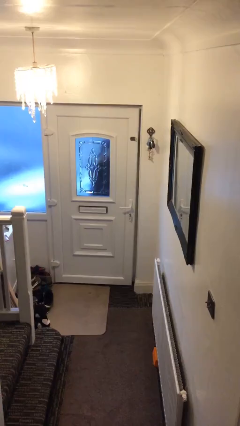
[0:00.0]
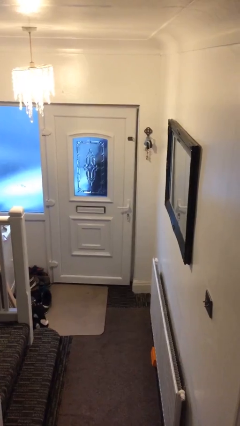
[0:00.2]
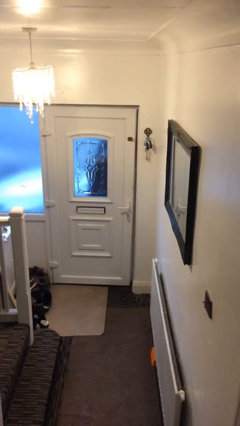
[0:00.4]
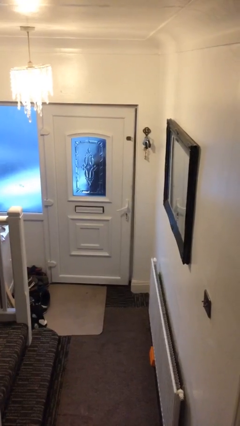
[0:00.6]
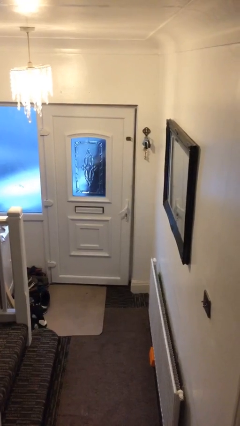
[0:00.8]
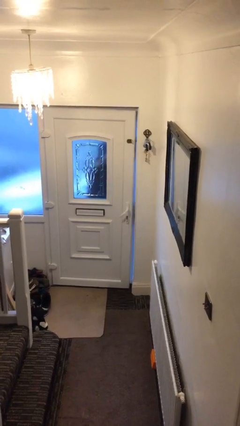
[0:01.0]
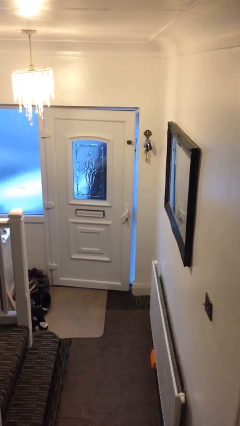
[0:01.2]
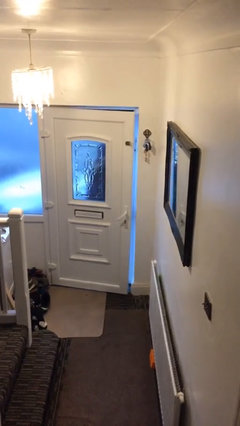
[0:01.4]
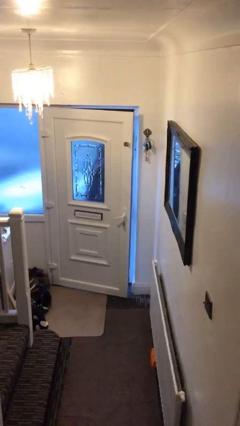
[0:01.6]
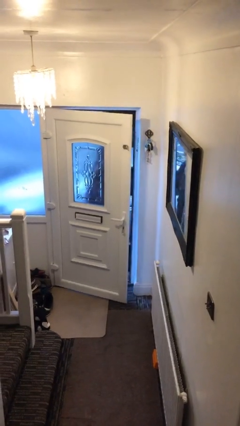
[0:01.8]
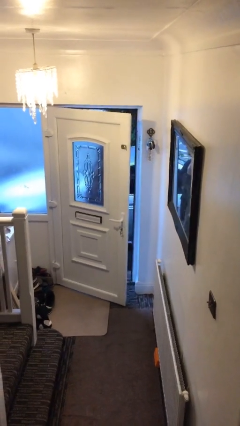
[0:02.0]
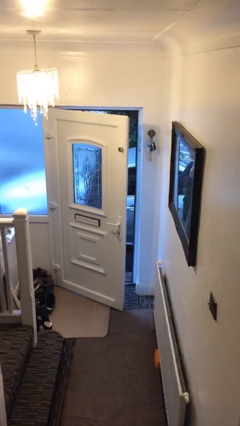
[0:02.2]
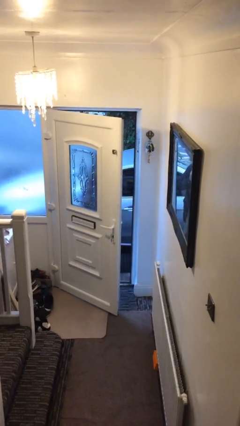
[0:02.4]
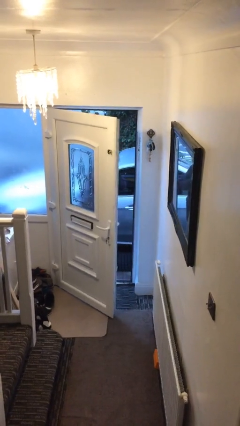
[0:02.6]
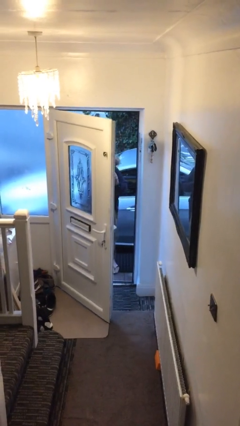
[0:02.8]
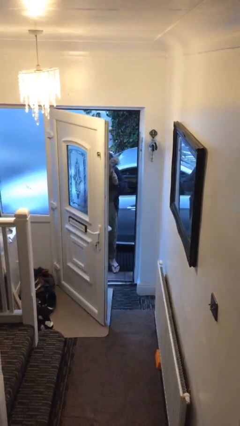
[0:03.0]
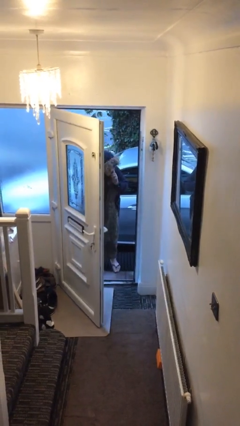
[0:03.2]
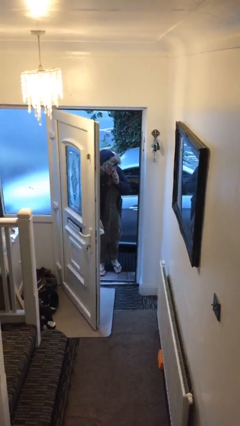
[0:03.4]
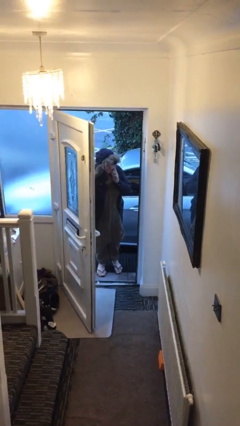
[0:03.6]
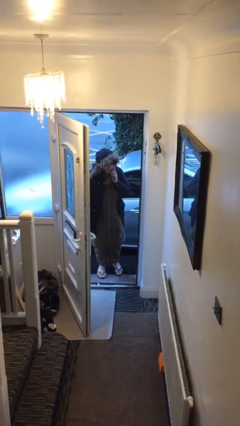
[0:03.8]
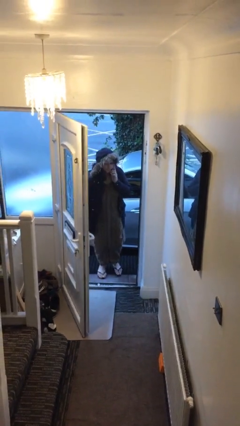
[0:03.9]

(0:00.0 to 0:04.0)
person opens facility door

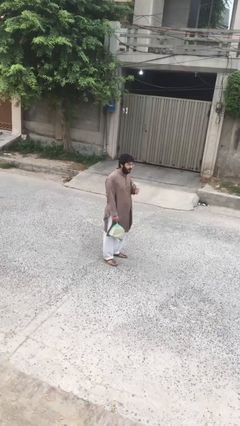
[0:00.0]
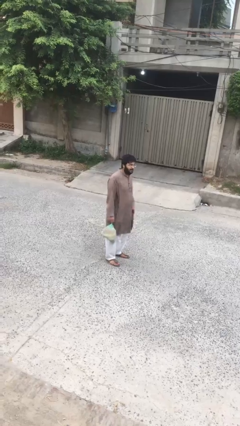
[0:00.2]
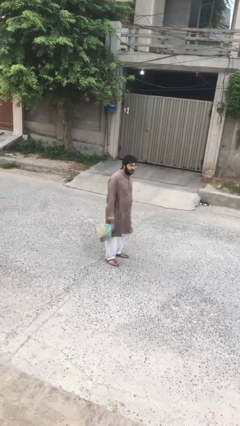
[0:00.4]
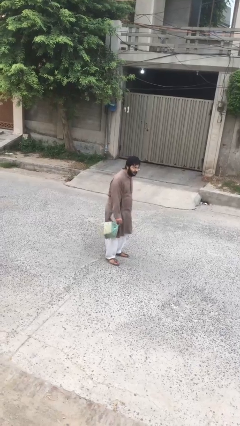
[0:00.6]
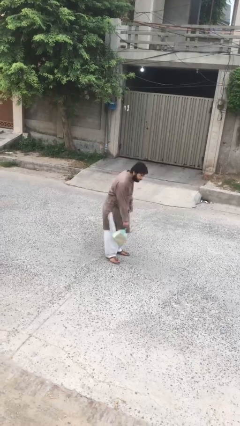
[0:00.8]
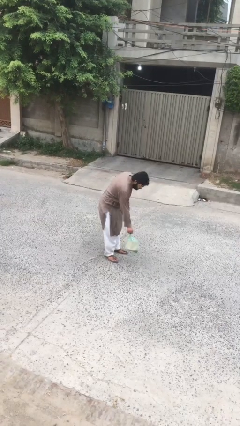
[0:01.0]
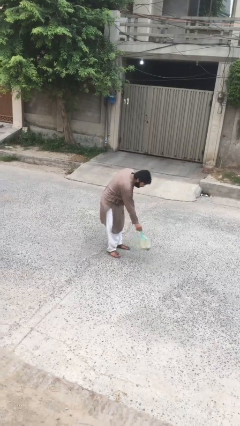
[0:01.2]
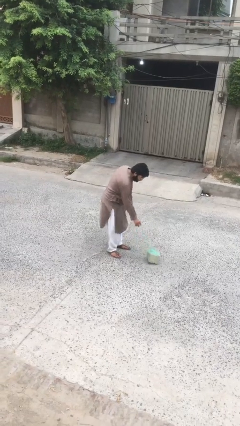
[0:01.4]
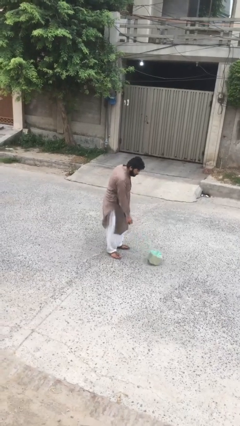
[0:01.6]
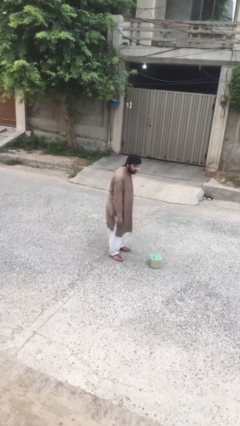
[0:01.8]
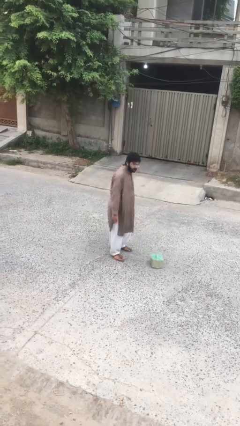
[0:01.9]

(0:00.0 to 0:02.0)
person puts down object on floor

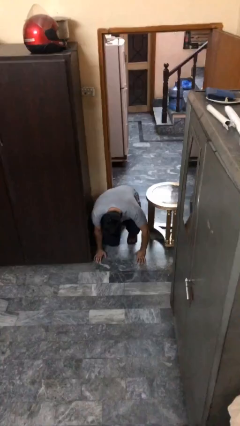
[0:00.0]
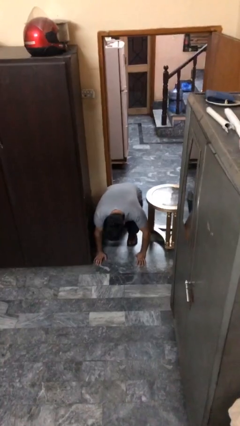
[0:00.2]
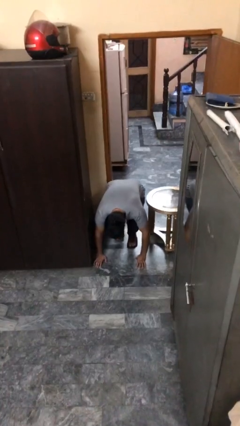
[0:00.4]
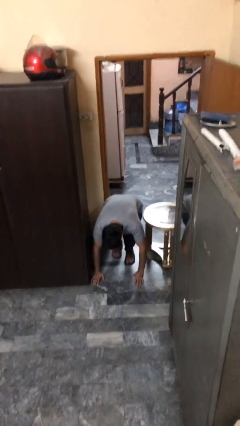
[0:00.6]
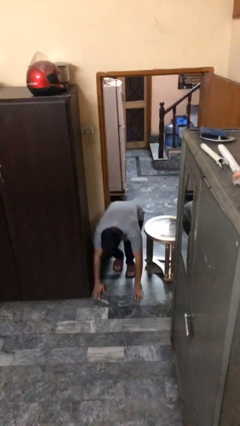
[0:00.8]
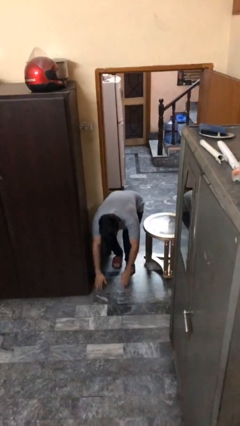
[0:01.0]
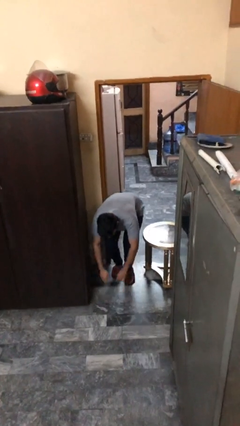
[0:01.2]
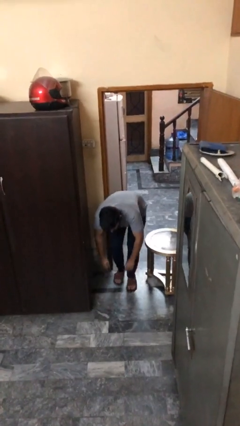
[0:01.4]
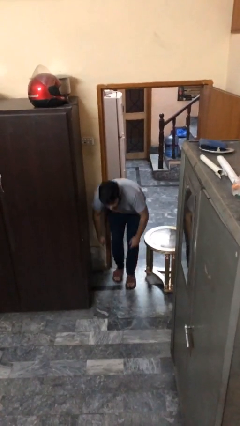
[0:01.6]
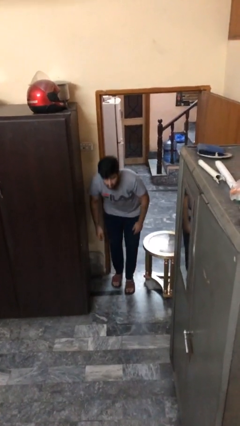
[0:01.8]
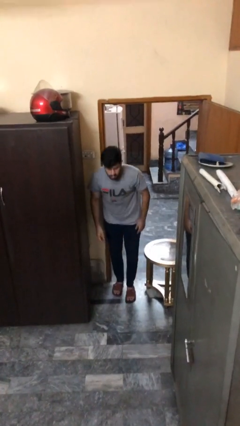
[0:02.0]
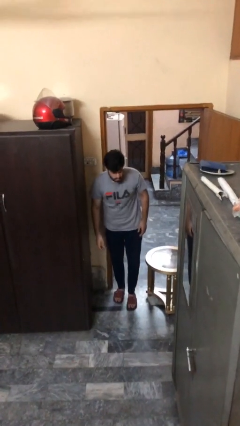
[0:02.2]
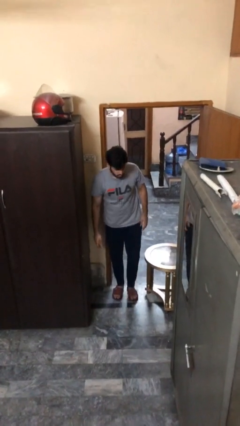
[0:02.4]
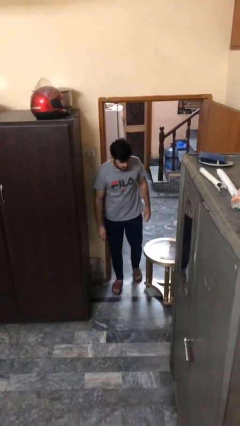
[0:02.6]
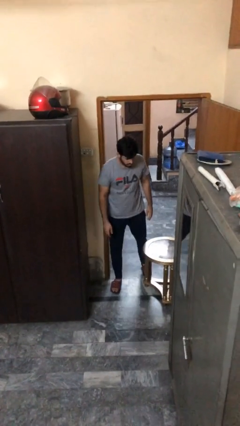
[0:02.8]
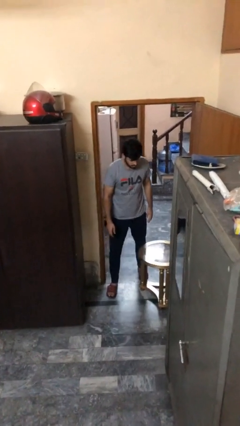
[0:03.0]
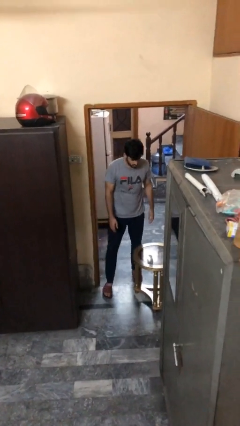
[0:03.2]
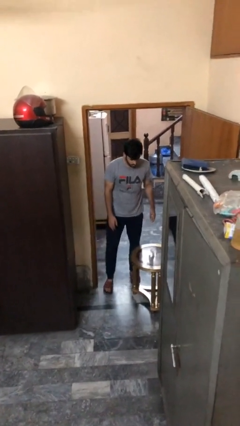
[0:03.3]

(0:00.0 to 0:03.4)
person stands up from floor

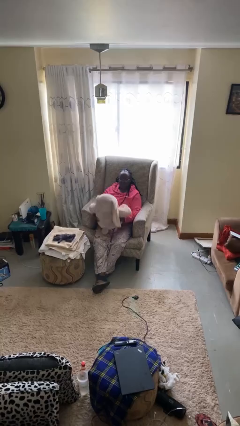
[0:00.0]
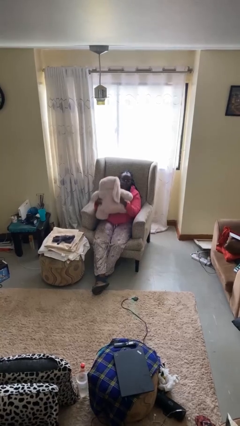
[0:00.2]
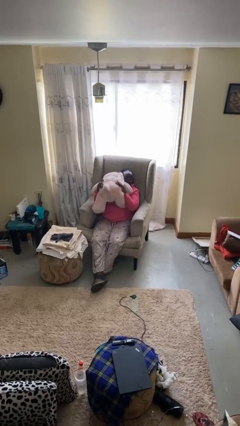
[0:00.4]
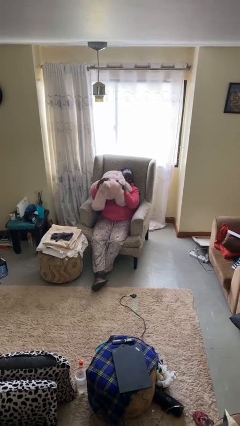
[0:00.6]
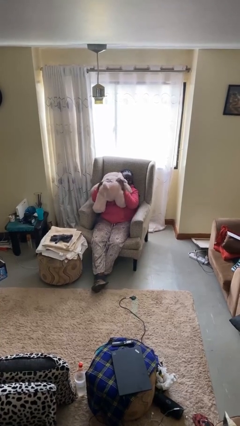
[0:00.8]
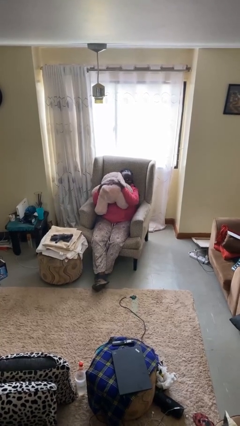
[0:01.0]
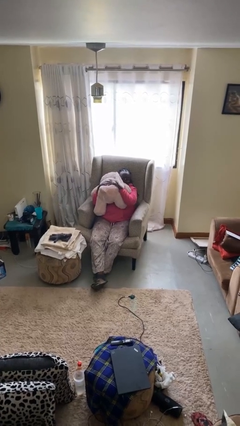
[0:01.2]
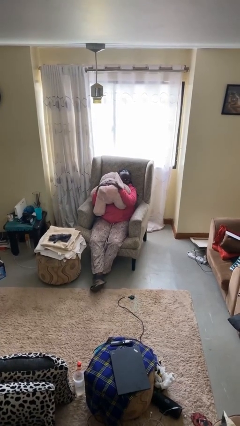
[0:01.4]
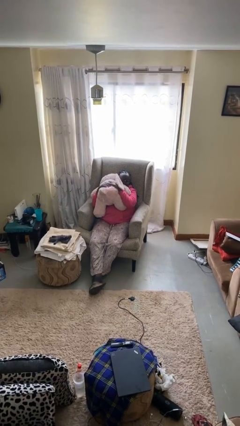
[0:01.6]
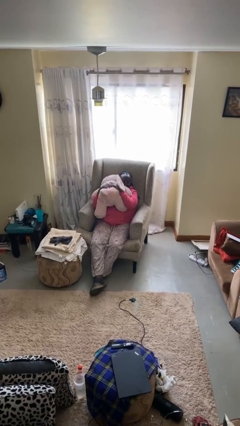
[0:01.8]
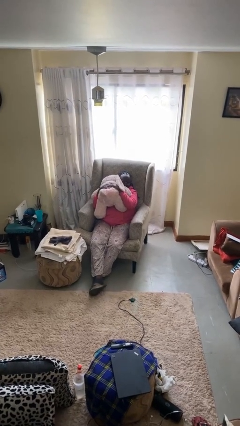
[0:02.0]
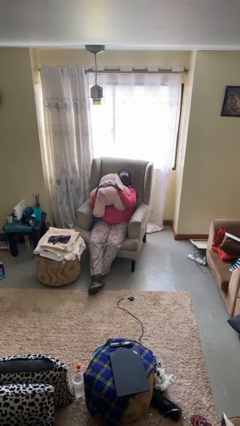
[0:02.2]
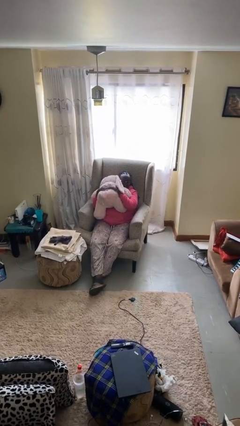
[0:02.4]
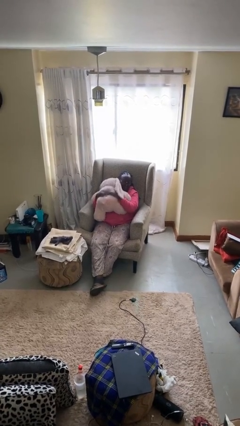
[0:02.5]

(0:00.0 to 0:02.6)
person hugs stuffed animal

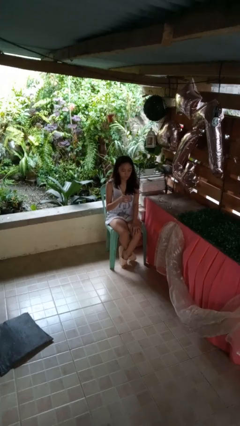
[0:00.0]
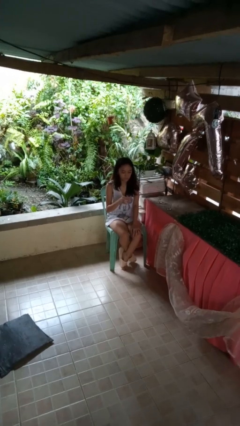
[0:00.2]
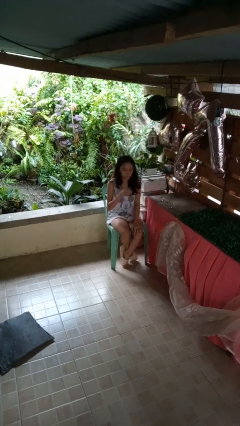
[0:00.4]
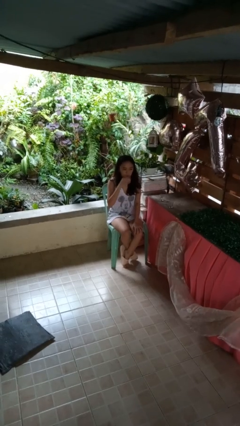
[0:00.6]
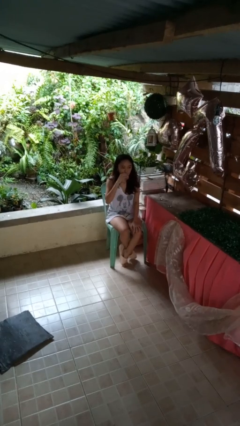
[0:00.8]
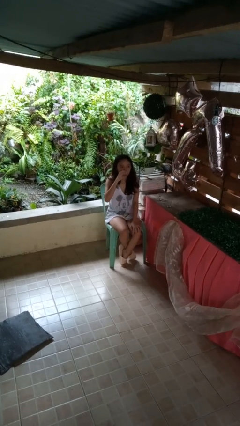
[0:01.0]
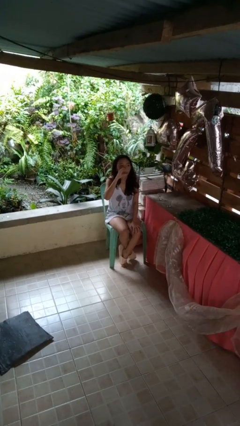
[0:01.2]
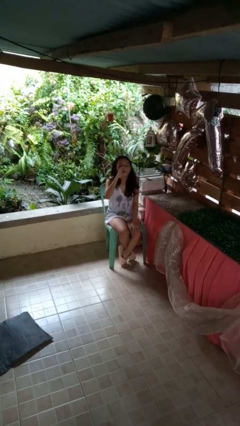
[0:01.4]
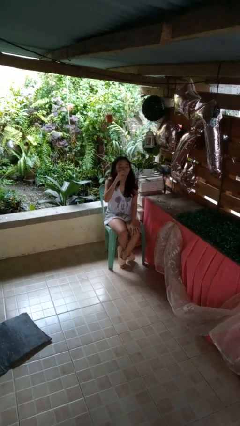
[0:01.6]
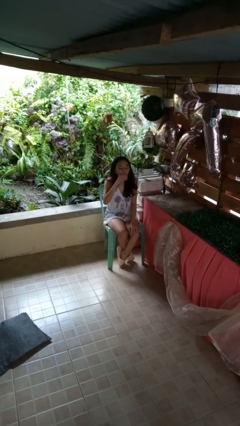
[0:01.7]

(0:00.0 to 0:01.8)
person drinks from shotglass

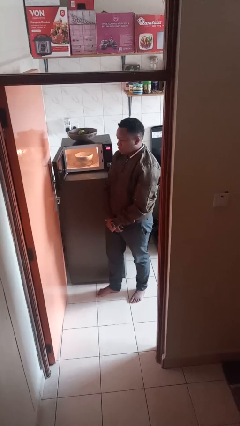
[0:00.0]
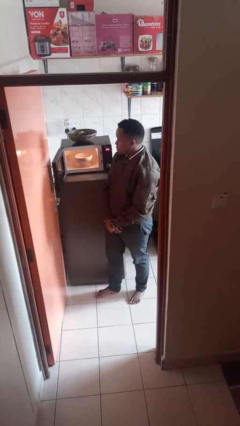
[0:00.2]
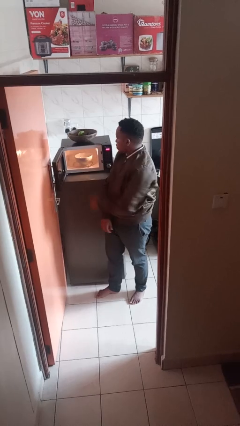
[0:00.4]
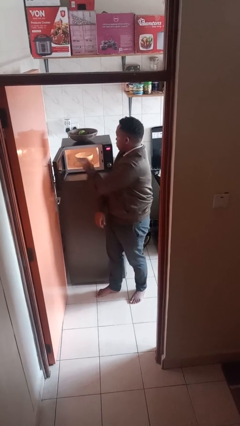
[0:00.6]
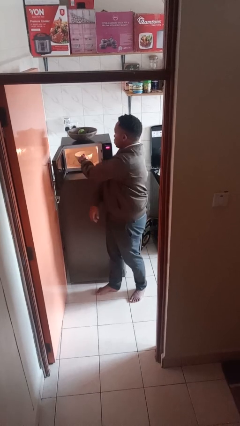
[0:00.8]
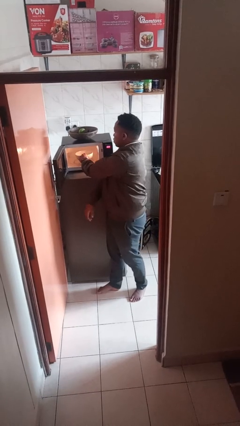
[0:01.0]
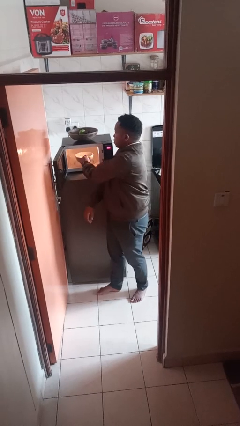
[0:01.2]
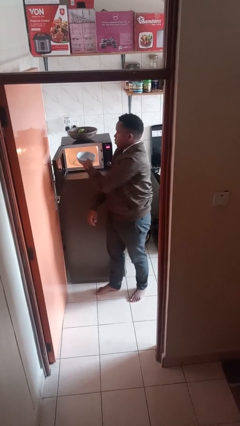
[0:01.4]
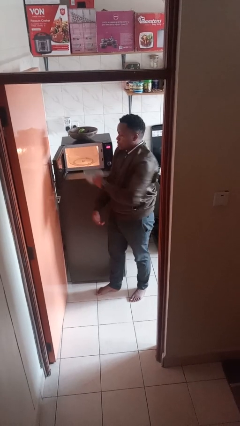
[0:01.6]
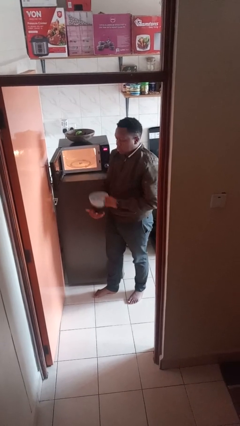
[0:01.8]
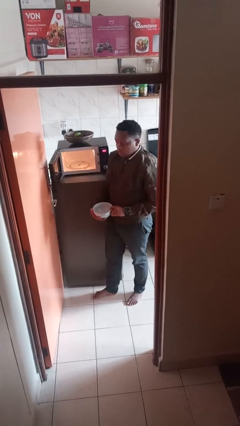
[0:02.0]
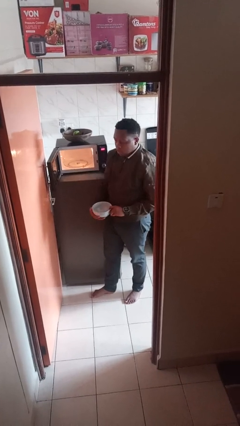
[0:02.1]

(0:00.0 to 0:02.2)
person takes object from microwave

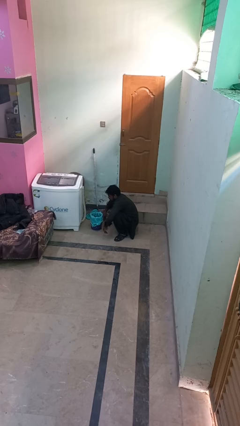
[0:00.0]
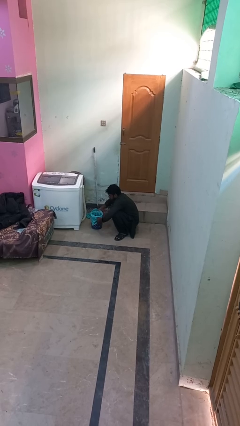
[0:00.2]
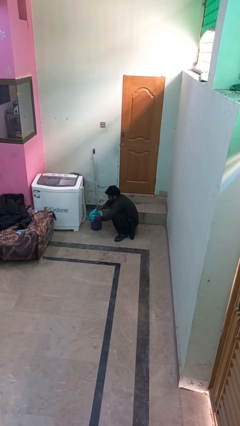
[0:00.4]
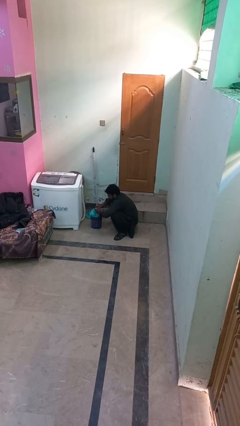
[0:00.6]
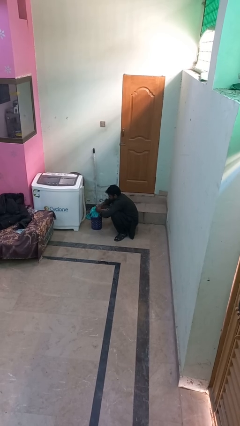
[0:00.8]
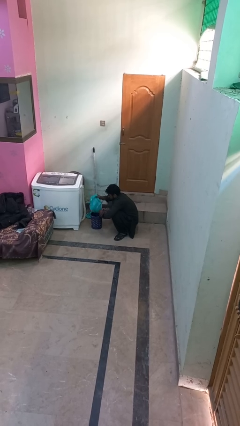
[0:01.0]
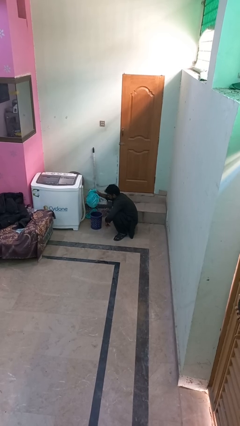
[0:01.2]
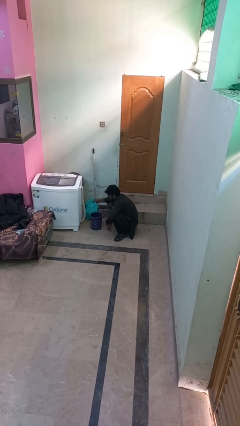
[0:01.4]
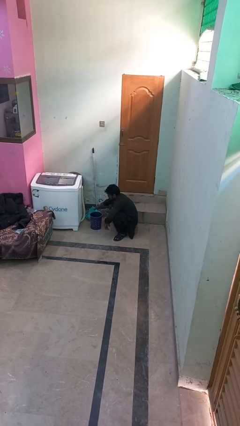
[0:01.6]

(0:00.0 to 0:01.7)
person removes trashbag from trashcan
